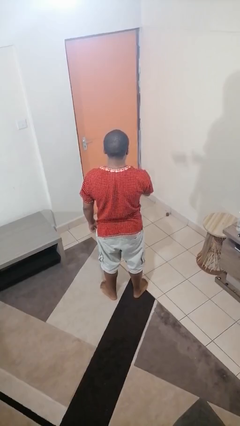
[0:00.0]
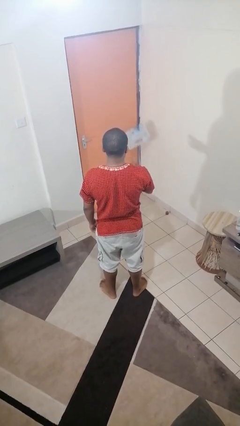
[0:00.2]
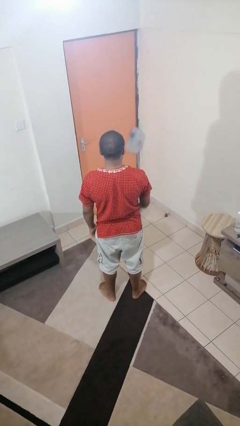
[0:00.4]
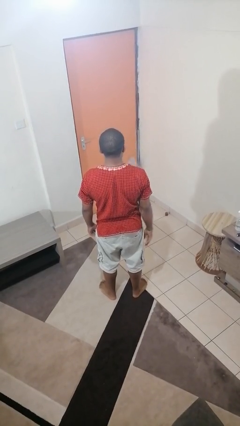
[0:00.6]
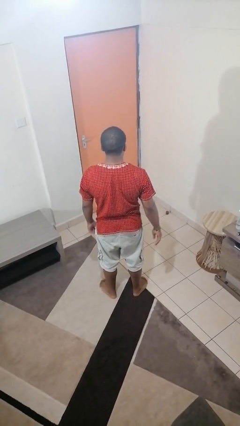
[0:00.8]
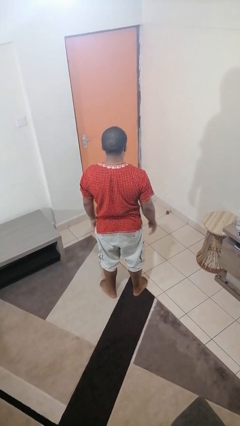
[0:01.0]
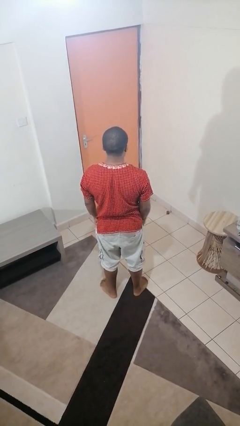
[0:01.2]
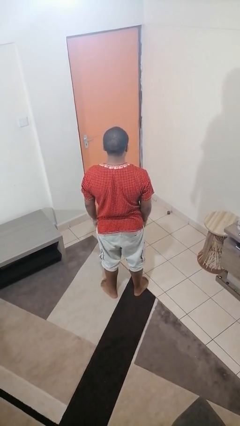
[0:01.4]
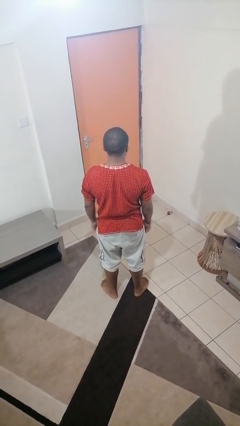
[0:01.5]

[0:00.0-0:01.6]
person throws object to ground

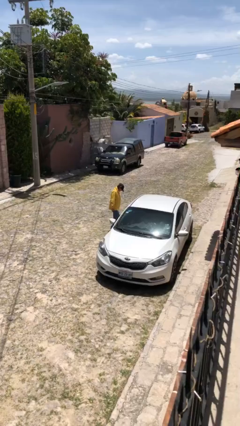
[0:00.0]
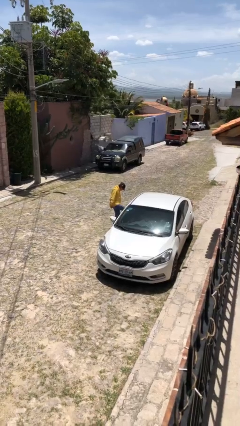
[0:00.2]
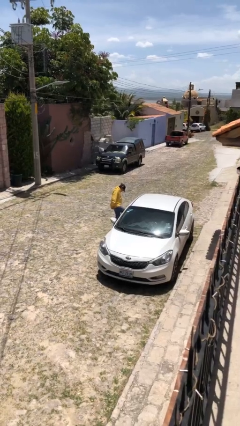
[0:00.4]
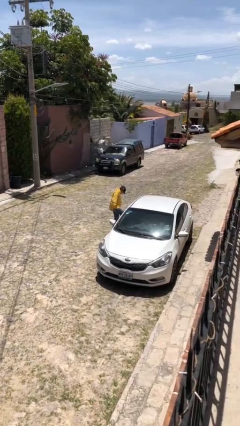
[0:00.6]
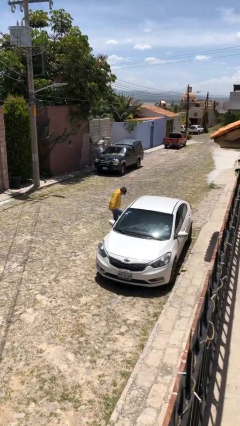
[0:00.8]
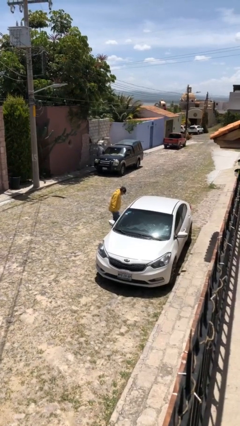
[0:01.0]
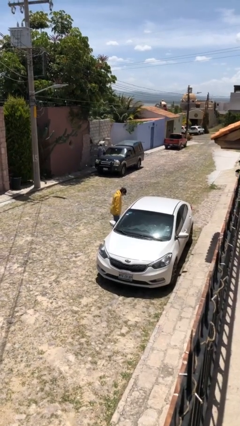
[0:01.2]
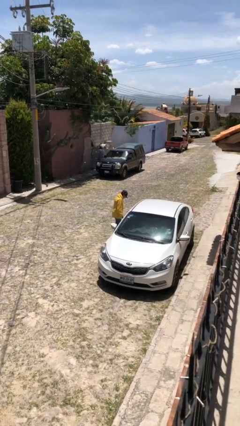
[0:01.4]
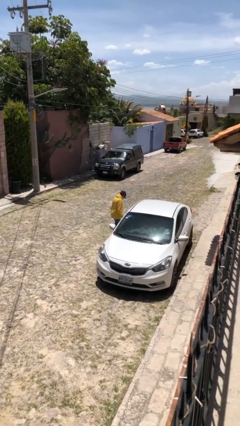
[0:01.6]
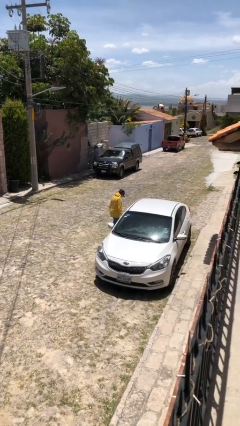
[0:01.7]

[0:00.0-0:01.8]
person kicks car tires

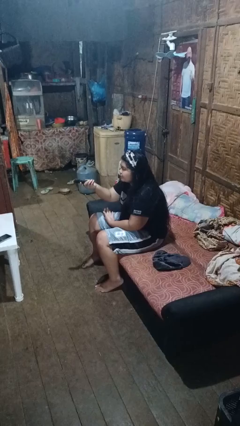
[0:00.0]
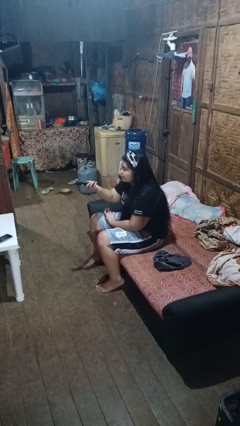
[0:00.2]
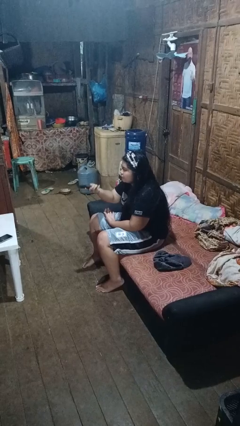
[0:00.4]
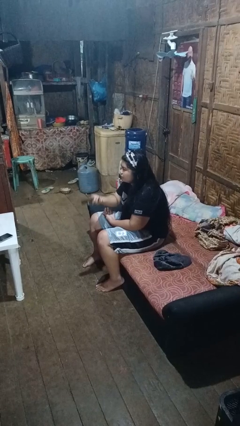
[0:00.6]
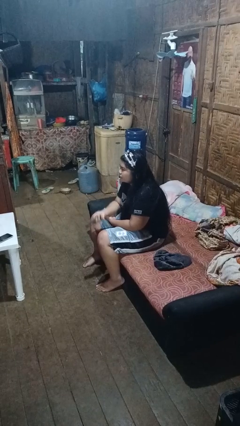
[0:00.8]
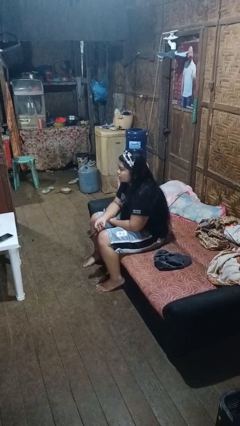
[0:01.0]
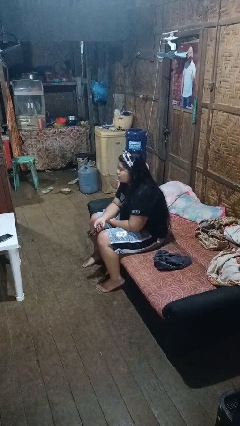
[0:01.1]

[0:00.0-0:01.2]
person uses television remote

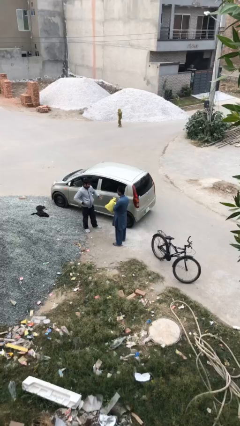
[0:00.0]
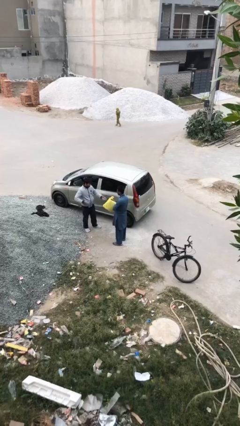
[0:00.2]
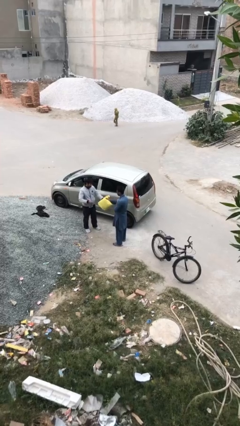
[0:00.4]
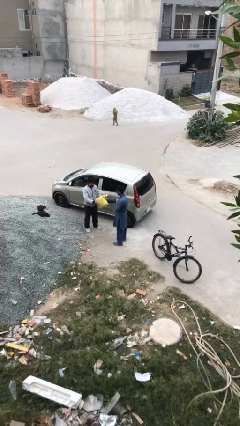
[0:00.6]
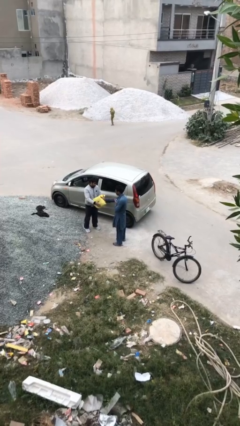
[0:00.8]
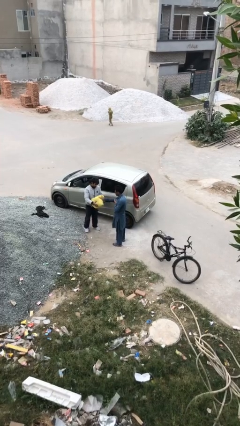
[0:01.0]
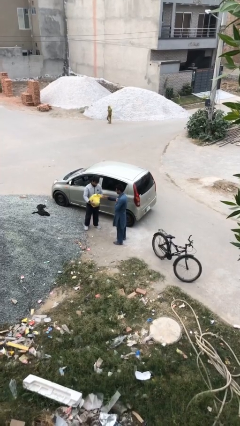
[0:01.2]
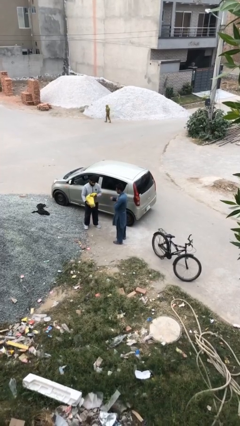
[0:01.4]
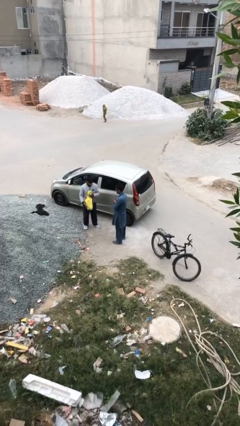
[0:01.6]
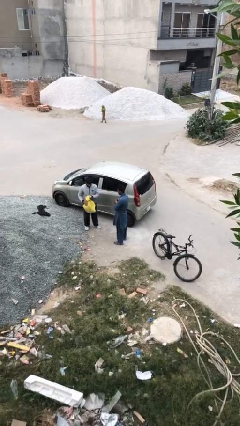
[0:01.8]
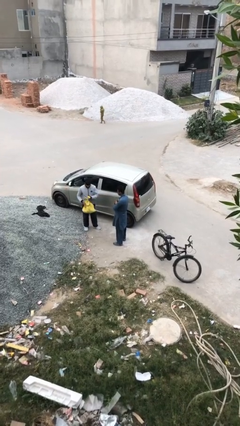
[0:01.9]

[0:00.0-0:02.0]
person transfers object to person

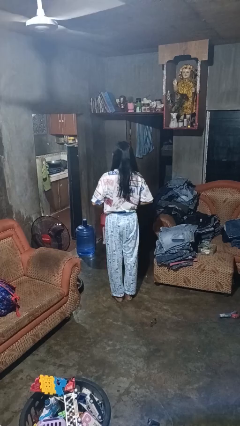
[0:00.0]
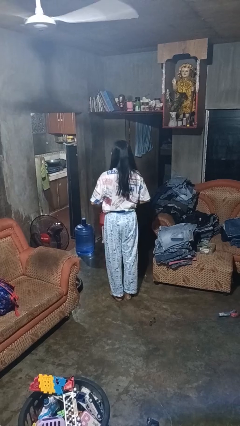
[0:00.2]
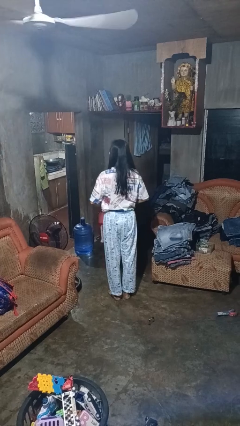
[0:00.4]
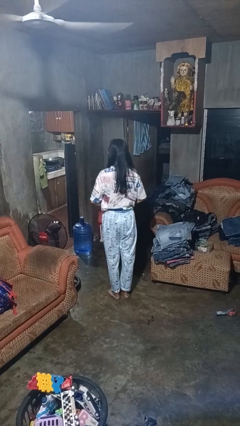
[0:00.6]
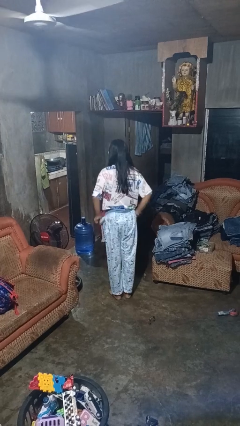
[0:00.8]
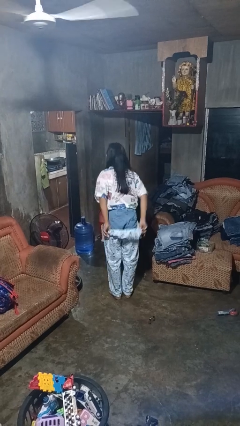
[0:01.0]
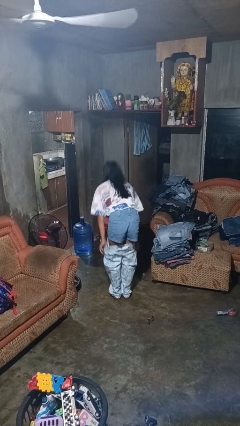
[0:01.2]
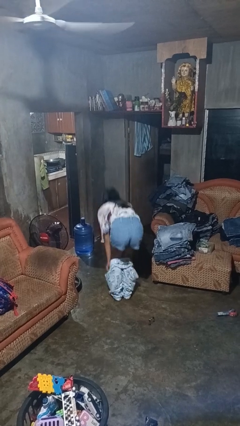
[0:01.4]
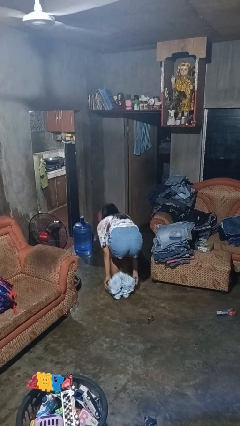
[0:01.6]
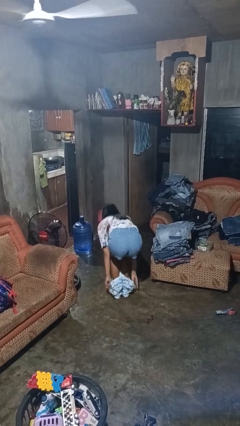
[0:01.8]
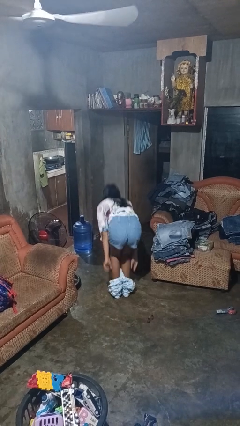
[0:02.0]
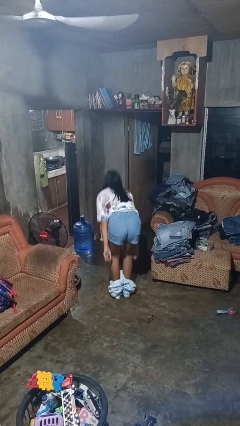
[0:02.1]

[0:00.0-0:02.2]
person takes off pants

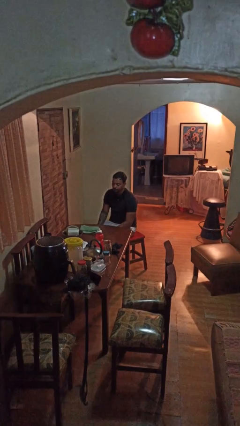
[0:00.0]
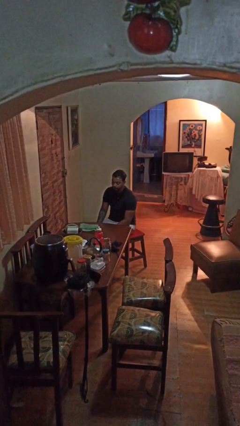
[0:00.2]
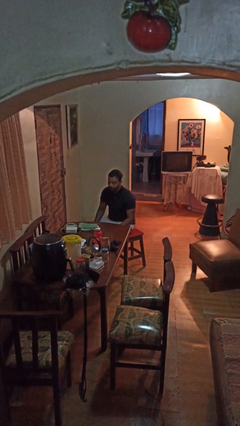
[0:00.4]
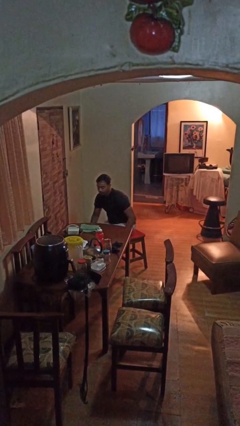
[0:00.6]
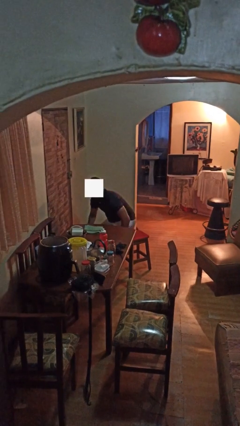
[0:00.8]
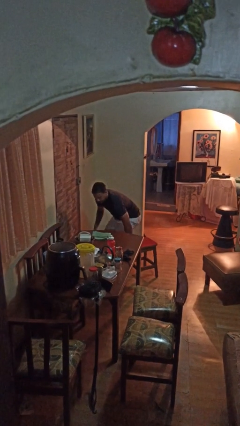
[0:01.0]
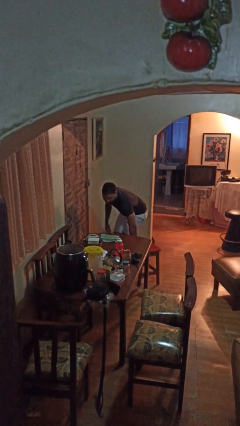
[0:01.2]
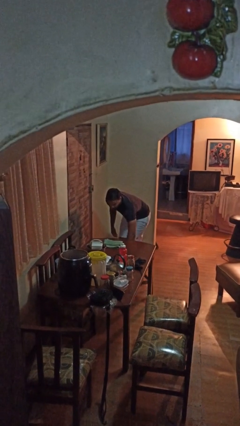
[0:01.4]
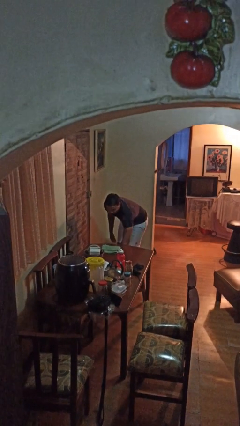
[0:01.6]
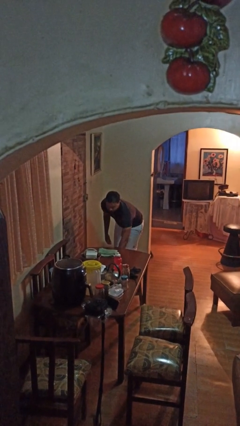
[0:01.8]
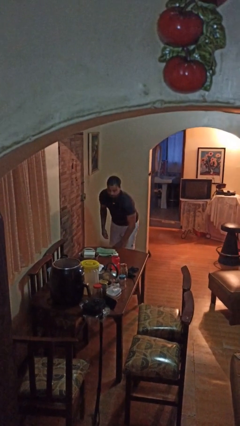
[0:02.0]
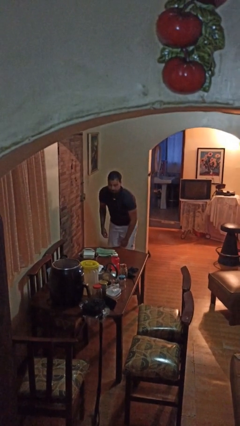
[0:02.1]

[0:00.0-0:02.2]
person stands up

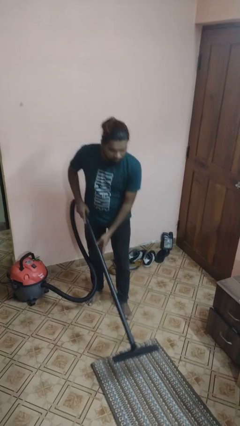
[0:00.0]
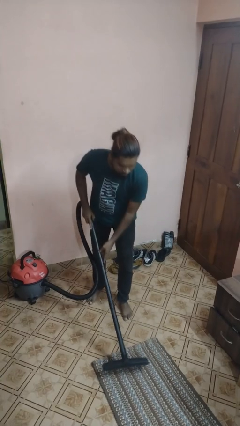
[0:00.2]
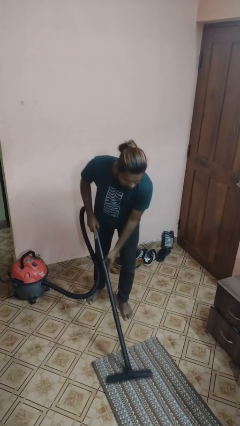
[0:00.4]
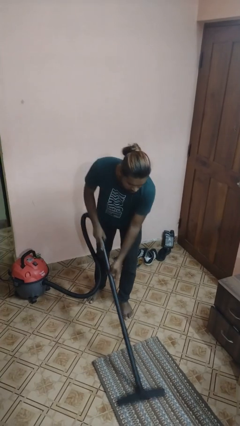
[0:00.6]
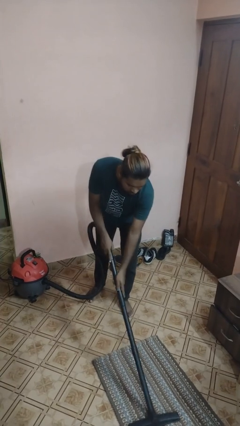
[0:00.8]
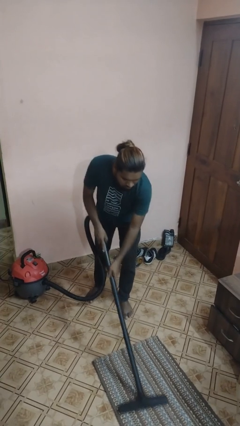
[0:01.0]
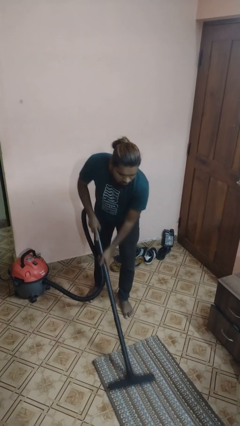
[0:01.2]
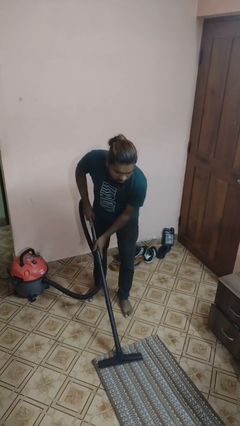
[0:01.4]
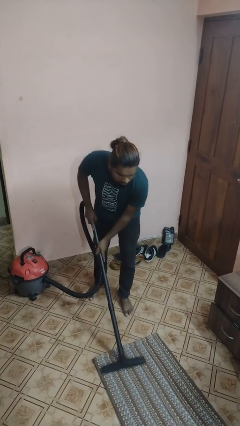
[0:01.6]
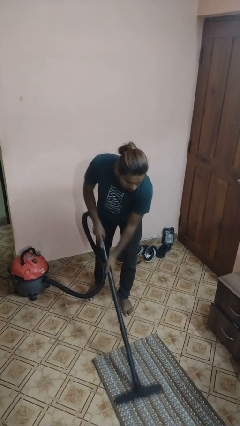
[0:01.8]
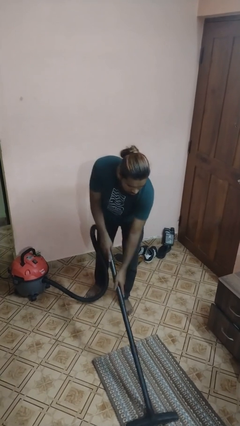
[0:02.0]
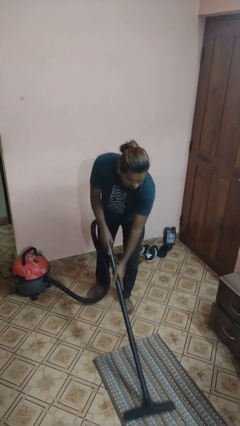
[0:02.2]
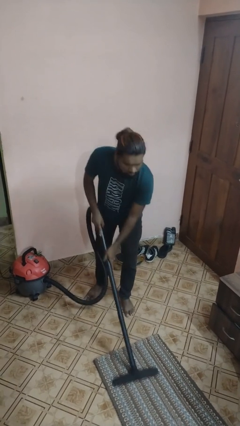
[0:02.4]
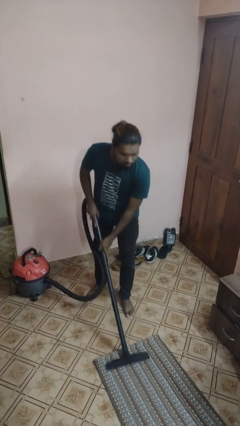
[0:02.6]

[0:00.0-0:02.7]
person vacuums carpet

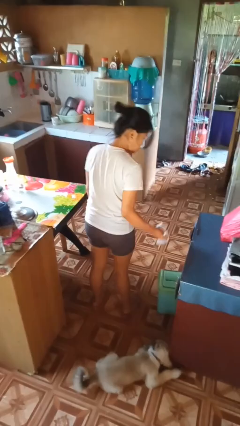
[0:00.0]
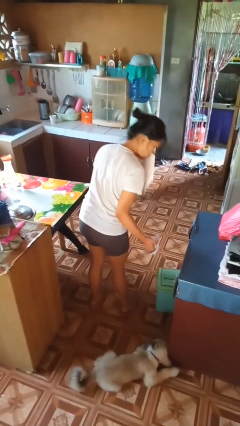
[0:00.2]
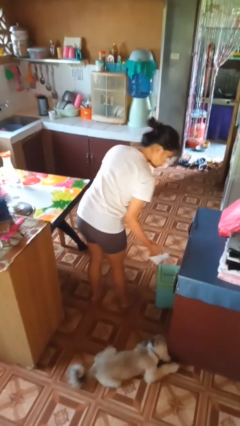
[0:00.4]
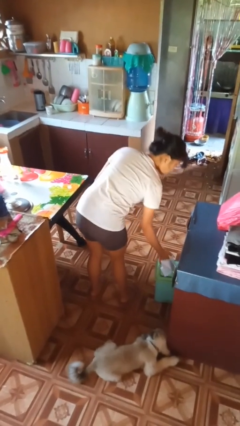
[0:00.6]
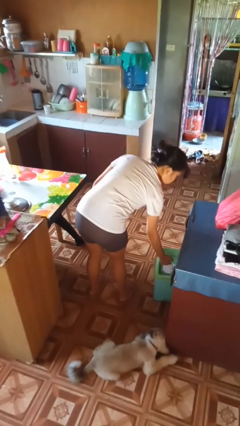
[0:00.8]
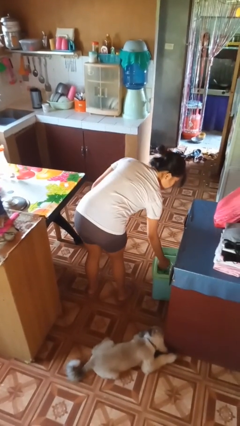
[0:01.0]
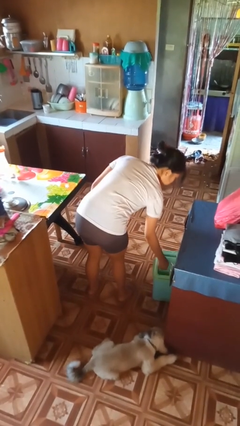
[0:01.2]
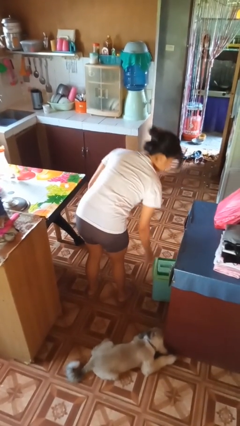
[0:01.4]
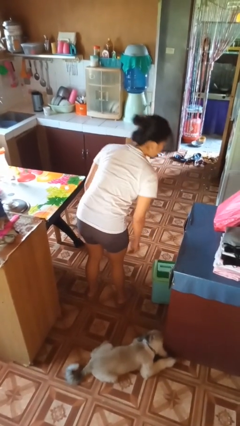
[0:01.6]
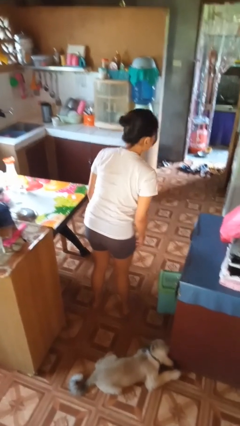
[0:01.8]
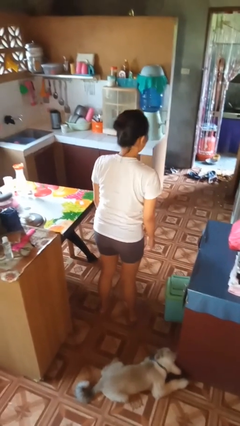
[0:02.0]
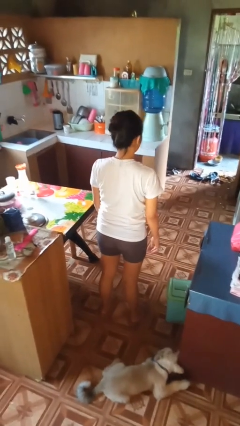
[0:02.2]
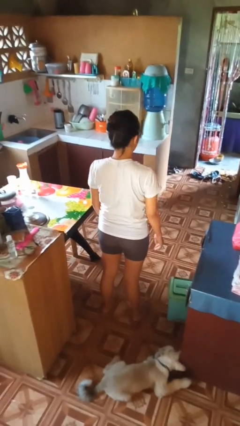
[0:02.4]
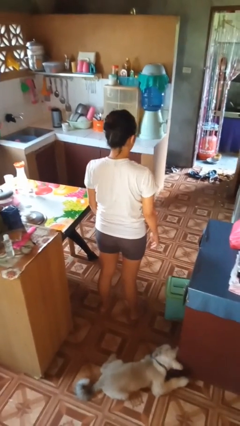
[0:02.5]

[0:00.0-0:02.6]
person discards trash

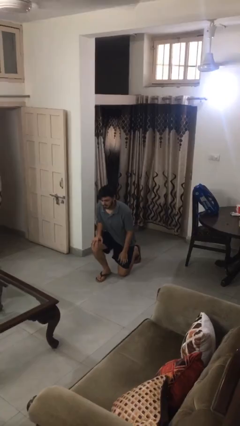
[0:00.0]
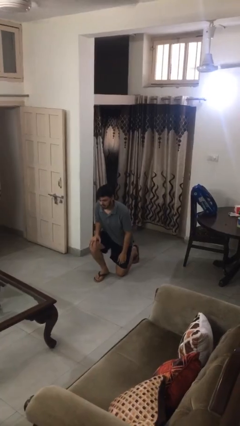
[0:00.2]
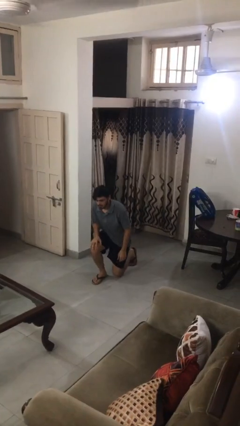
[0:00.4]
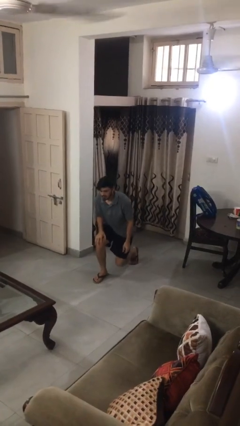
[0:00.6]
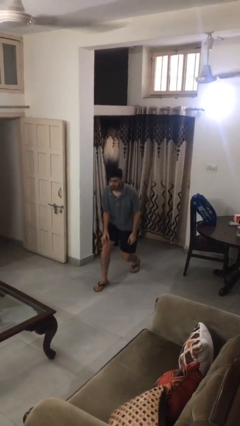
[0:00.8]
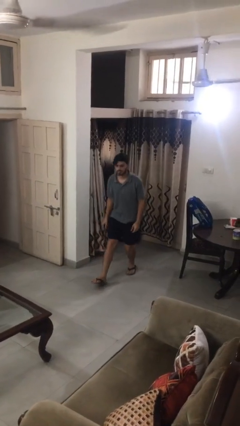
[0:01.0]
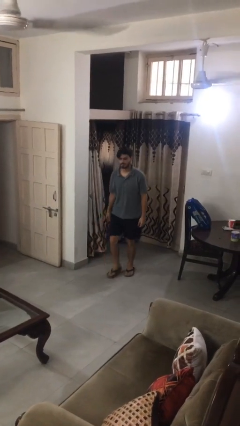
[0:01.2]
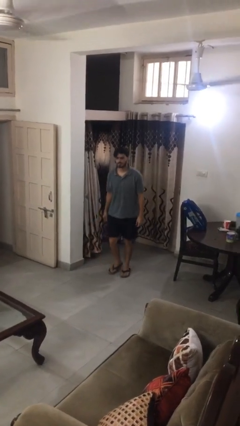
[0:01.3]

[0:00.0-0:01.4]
person stands up from floor
